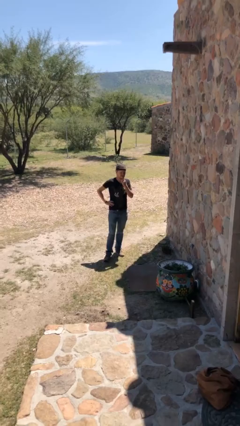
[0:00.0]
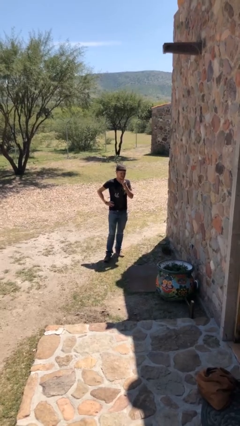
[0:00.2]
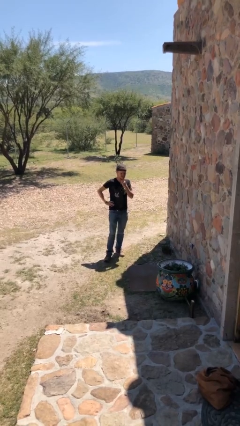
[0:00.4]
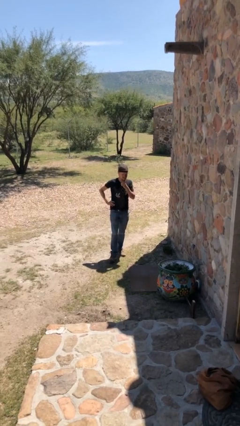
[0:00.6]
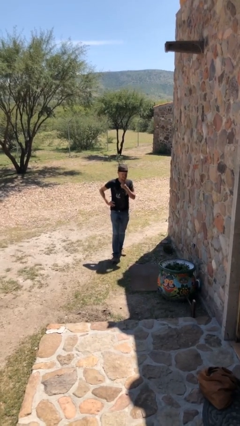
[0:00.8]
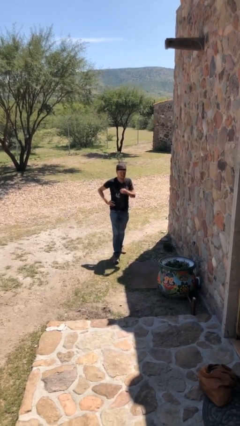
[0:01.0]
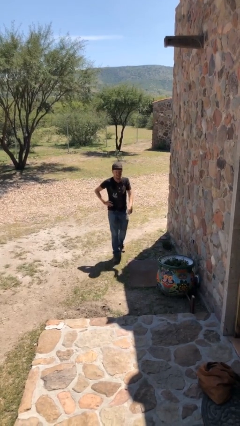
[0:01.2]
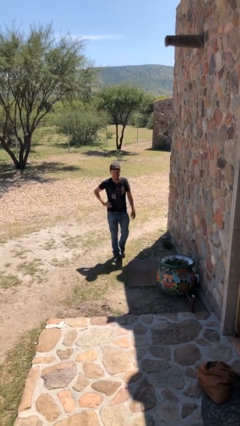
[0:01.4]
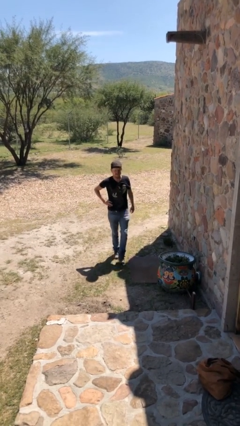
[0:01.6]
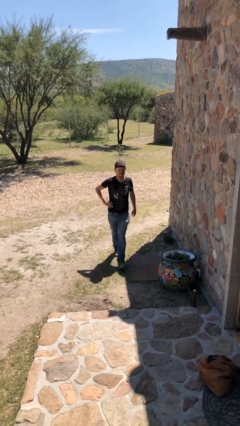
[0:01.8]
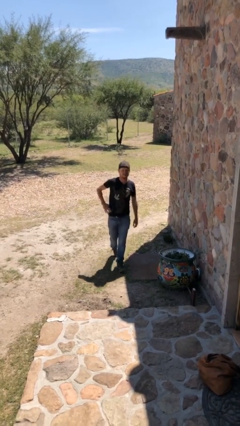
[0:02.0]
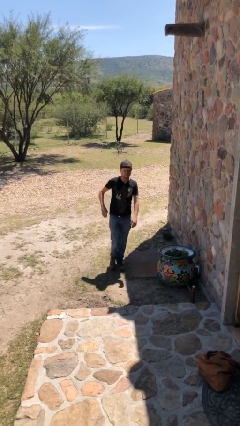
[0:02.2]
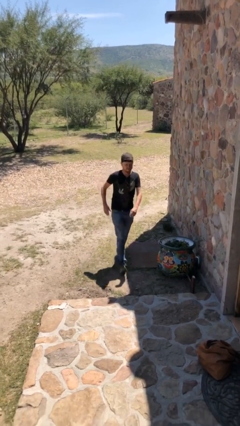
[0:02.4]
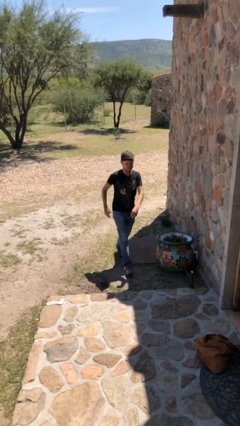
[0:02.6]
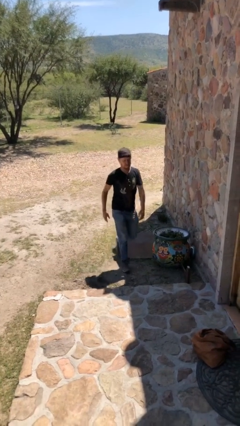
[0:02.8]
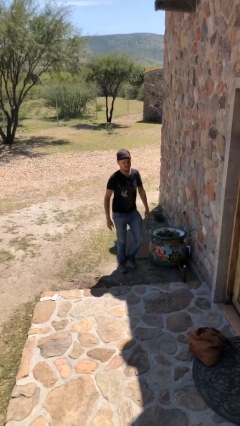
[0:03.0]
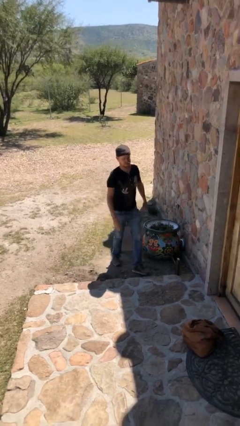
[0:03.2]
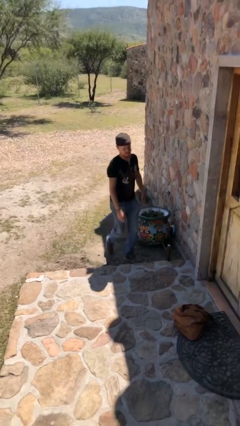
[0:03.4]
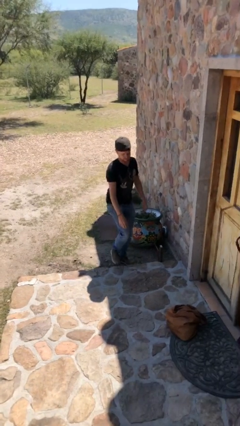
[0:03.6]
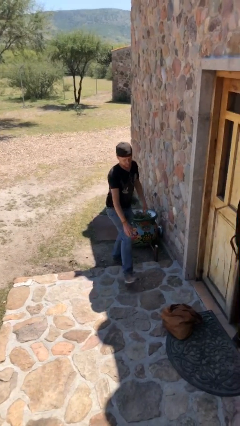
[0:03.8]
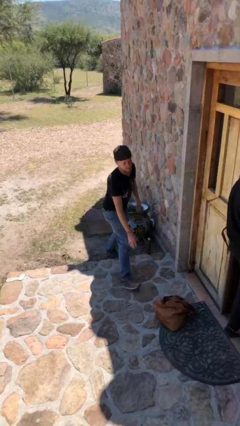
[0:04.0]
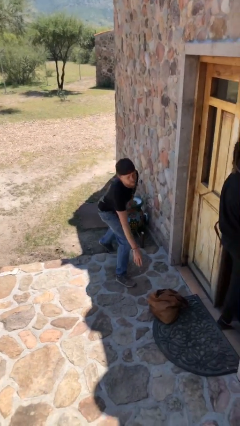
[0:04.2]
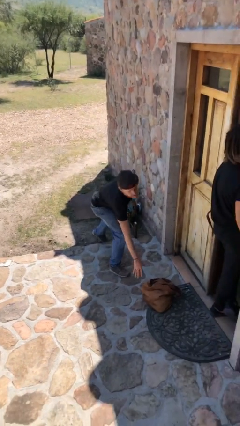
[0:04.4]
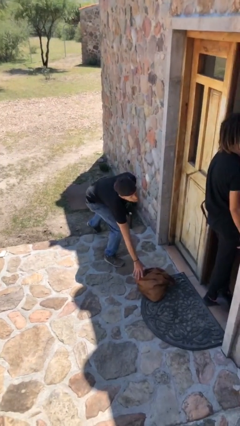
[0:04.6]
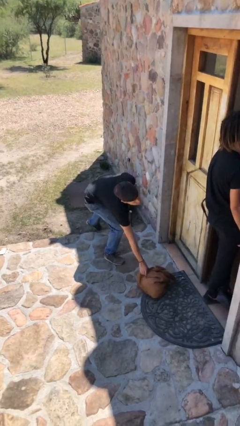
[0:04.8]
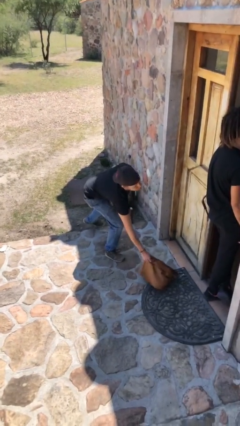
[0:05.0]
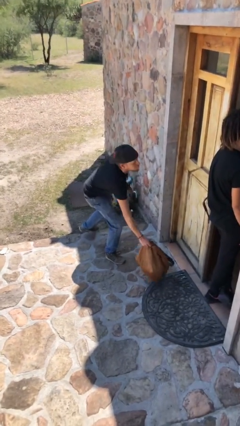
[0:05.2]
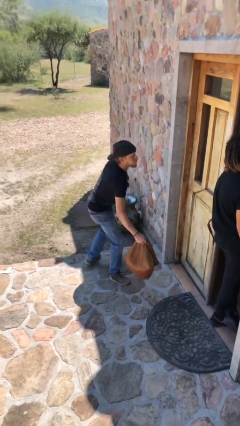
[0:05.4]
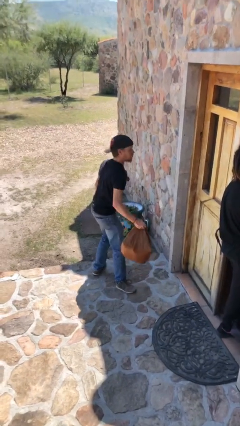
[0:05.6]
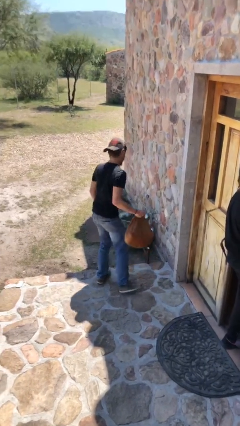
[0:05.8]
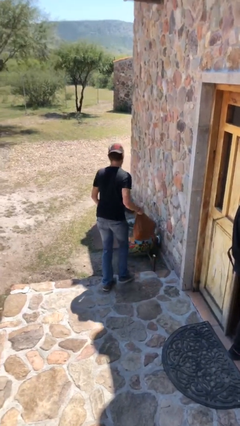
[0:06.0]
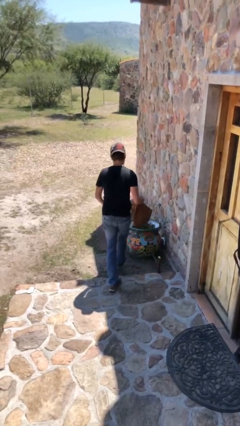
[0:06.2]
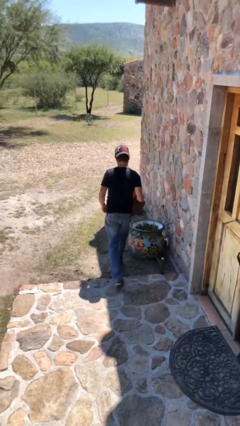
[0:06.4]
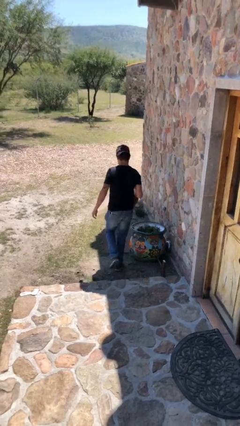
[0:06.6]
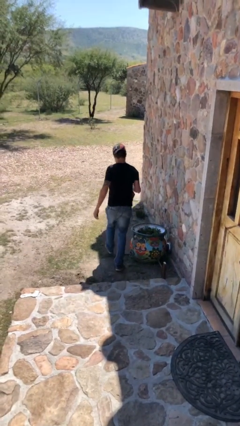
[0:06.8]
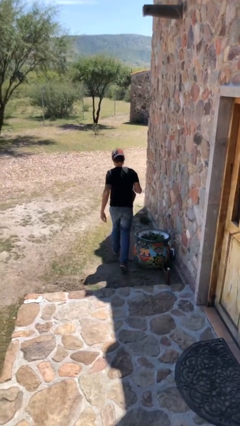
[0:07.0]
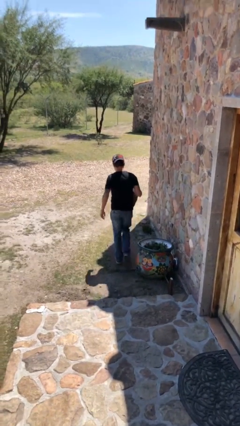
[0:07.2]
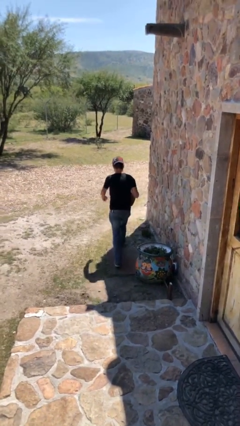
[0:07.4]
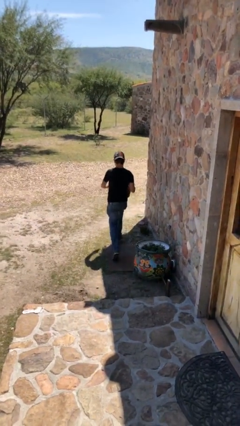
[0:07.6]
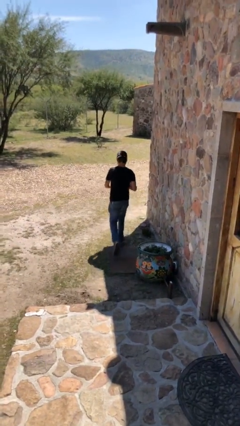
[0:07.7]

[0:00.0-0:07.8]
person steals object from person

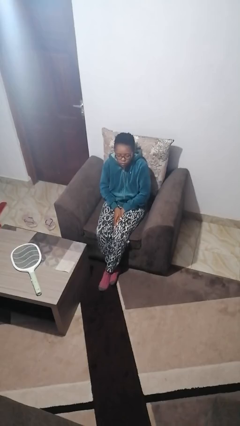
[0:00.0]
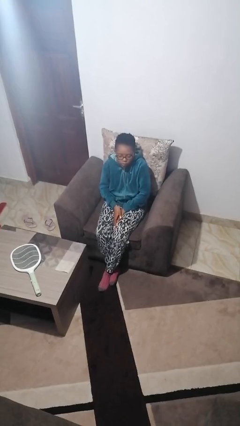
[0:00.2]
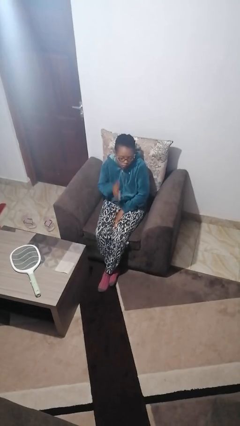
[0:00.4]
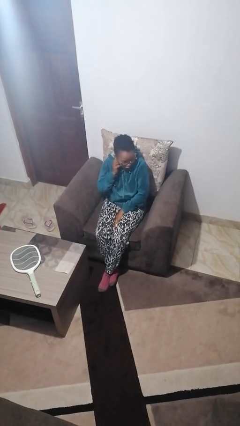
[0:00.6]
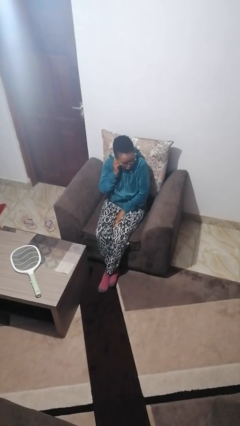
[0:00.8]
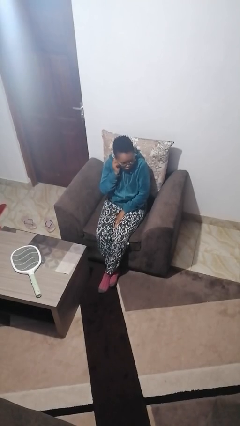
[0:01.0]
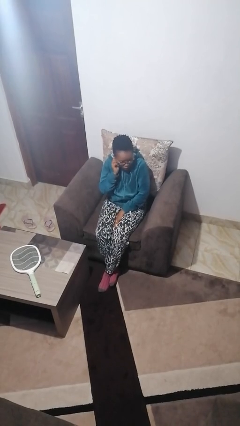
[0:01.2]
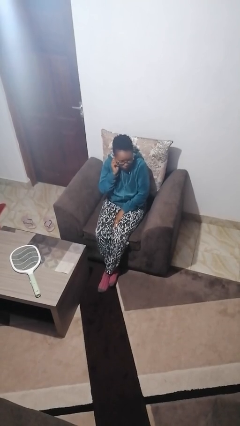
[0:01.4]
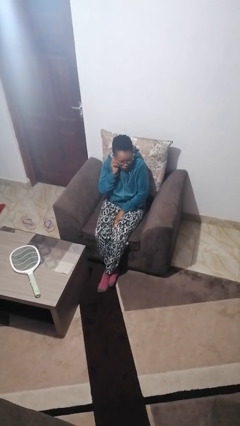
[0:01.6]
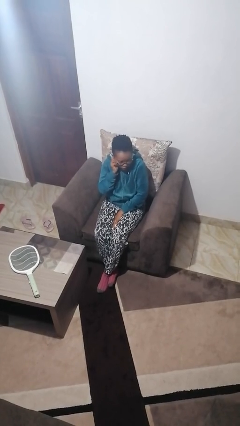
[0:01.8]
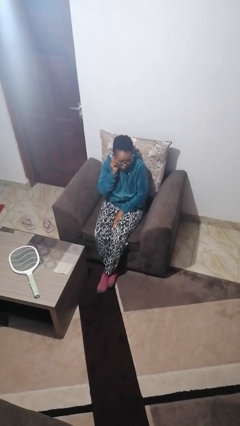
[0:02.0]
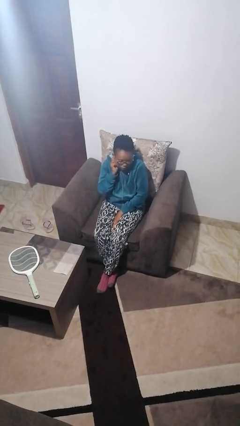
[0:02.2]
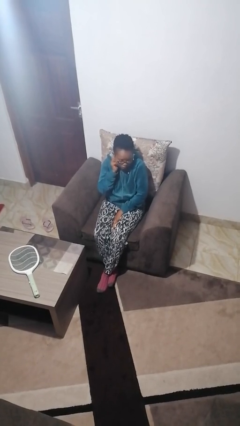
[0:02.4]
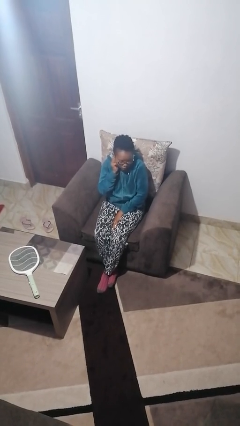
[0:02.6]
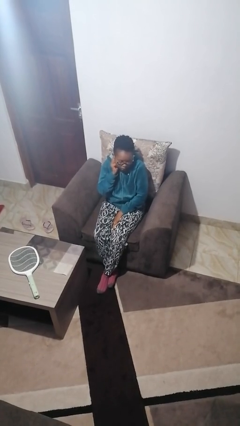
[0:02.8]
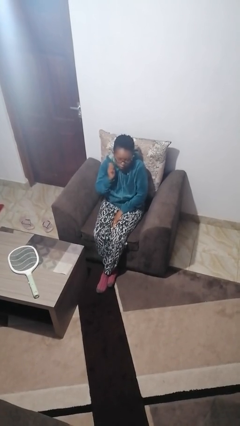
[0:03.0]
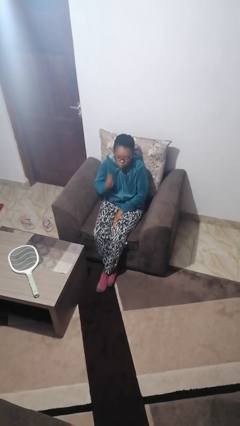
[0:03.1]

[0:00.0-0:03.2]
person touches earlobe

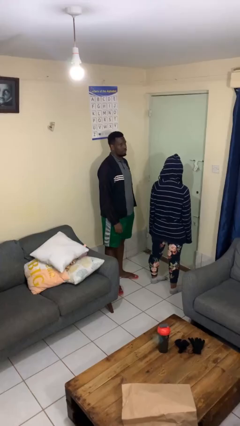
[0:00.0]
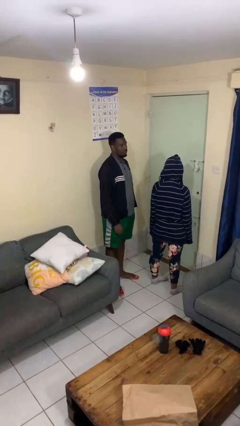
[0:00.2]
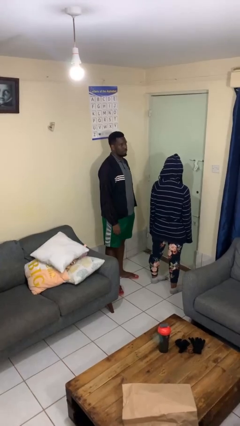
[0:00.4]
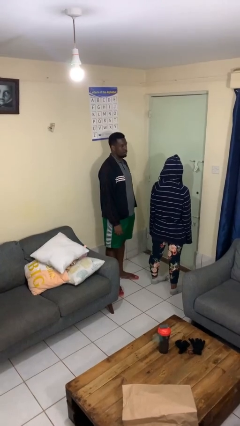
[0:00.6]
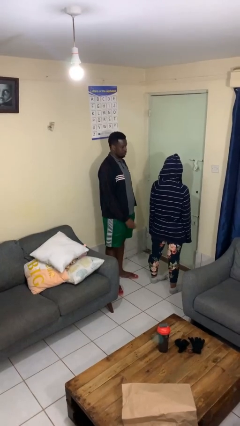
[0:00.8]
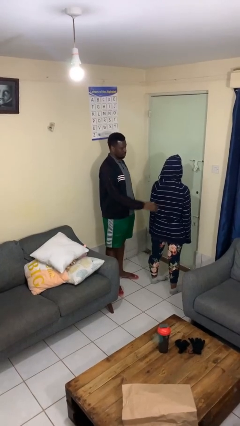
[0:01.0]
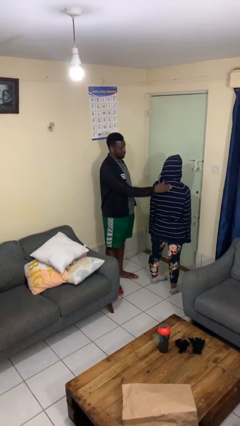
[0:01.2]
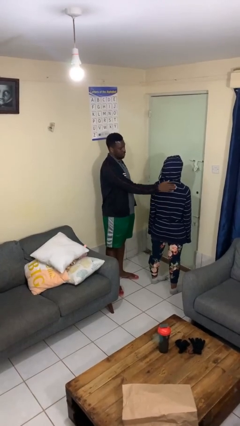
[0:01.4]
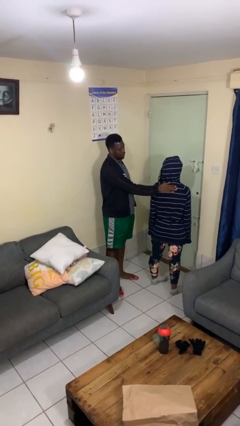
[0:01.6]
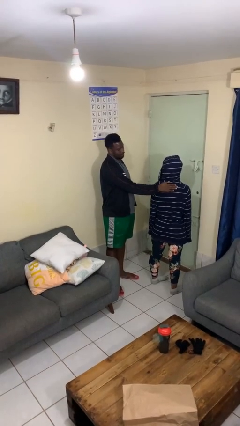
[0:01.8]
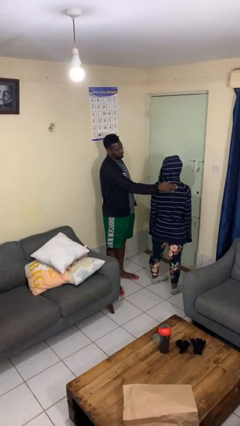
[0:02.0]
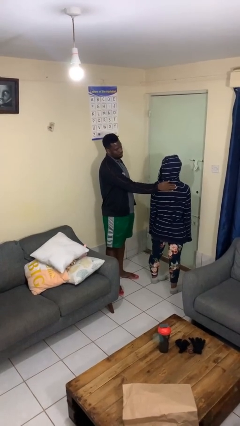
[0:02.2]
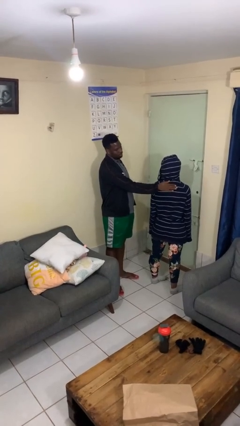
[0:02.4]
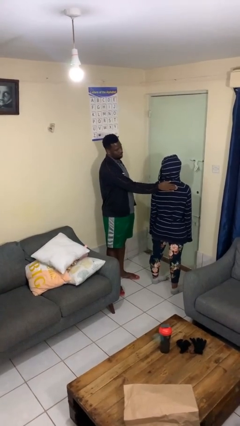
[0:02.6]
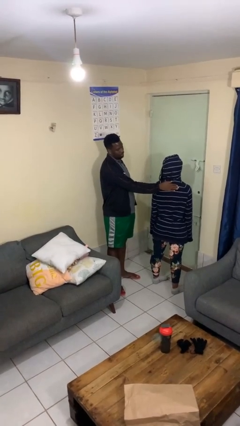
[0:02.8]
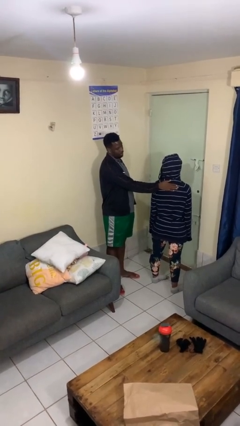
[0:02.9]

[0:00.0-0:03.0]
person touches back of person

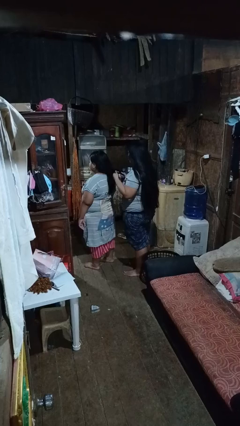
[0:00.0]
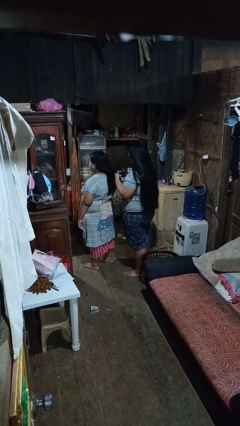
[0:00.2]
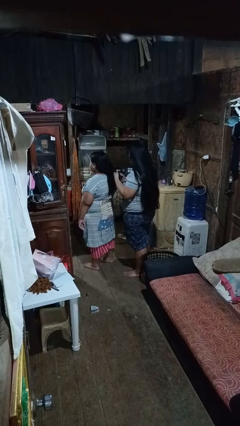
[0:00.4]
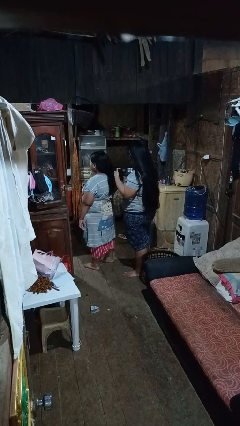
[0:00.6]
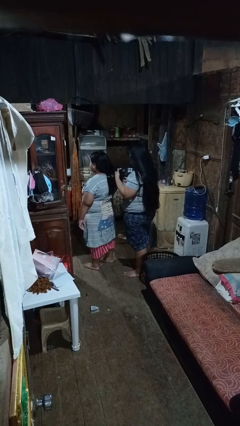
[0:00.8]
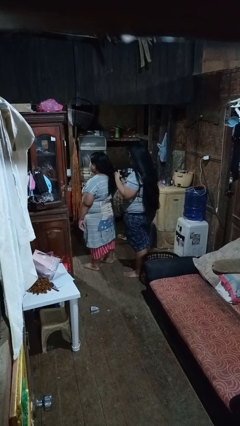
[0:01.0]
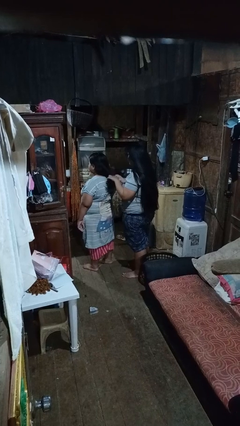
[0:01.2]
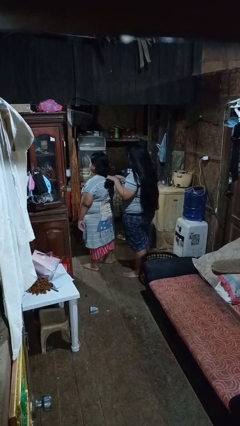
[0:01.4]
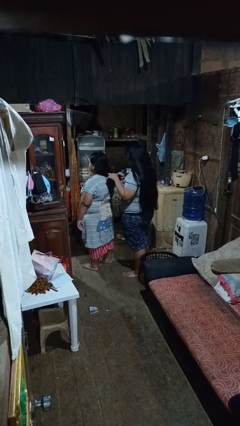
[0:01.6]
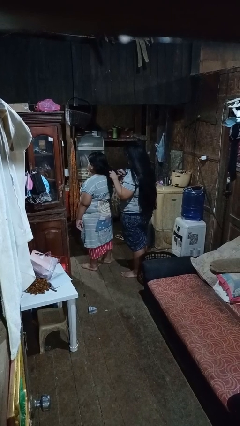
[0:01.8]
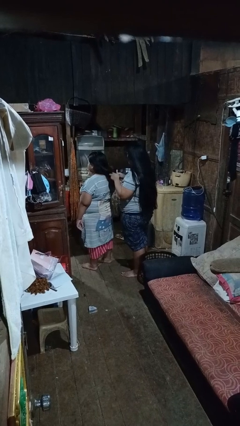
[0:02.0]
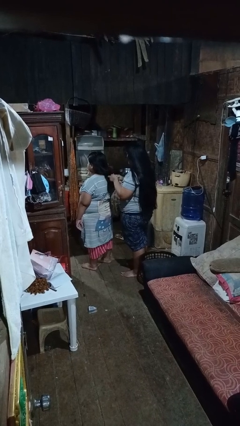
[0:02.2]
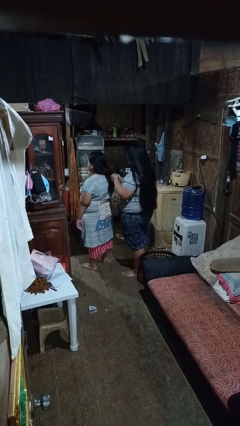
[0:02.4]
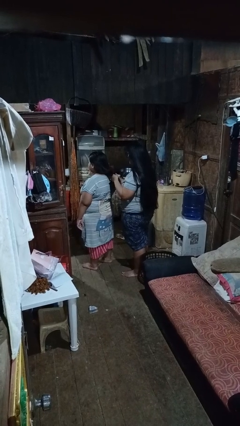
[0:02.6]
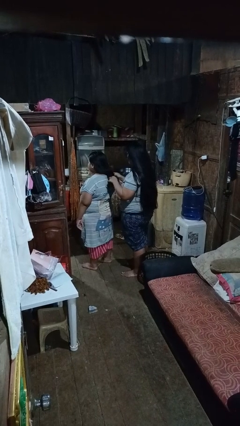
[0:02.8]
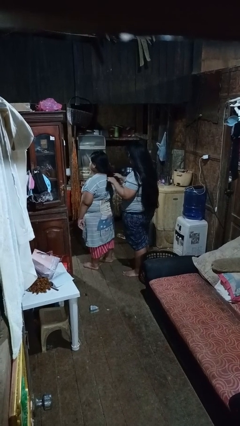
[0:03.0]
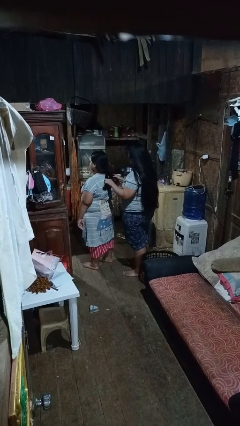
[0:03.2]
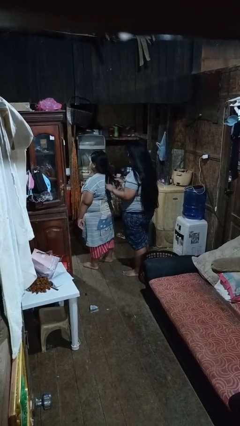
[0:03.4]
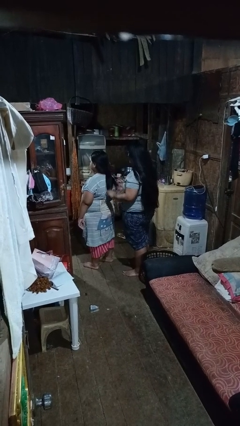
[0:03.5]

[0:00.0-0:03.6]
person braids hair of person
